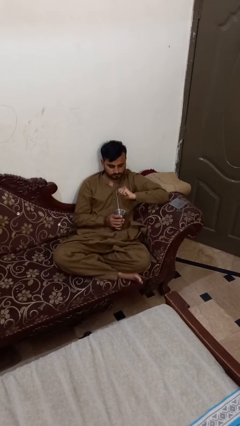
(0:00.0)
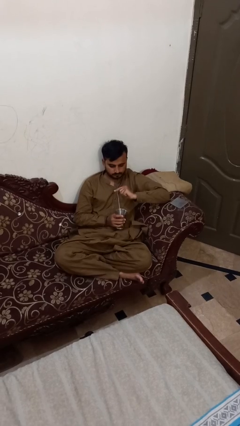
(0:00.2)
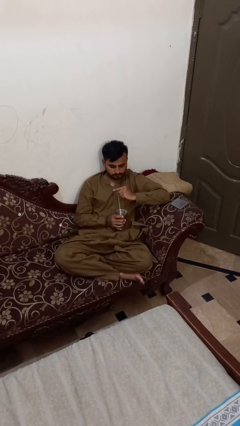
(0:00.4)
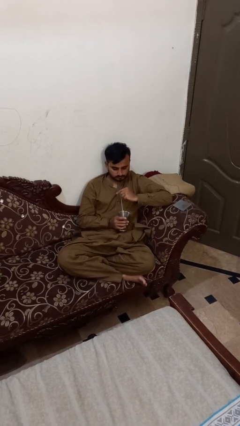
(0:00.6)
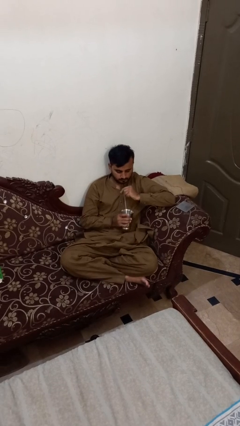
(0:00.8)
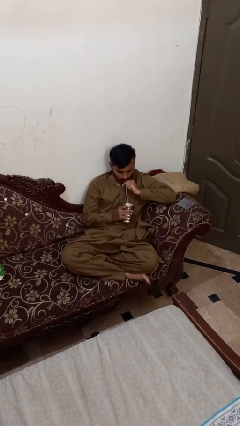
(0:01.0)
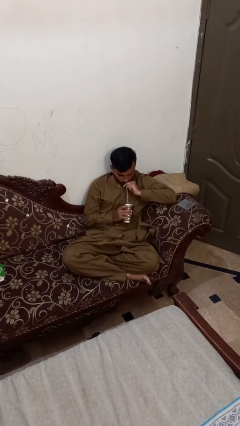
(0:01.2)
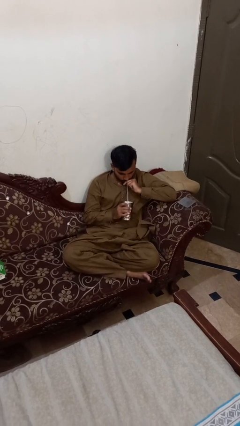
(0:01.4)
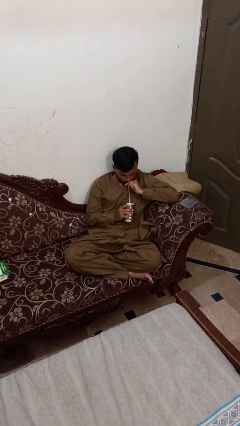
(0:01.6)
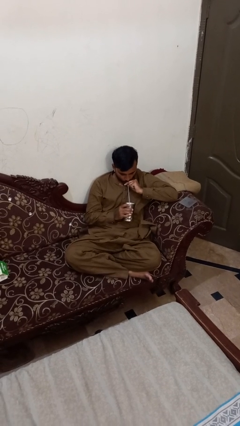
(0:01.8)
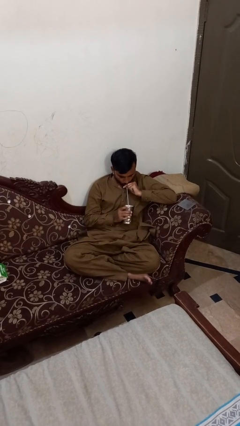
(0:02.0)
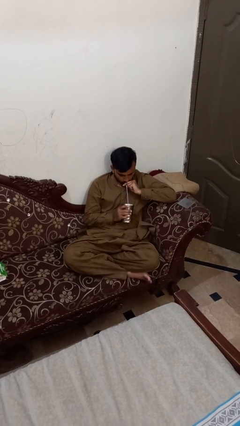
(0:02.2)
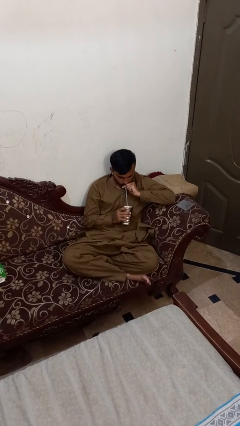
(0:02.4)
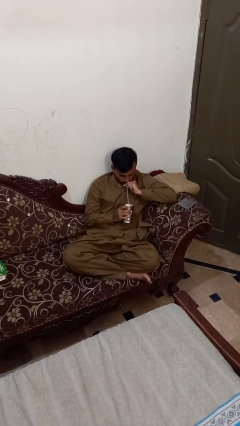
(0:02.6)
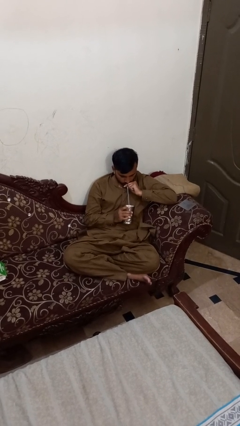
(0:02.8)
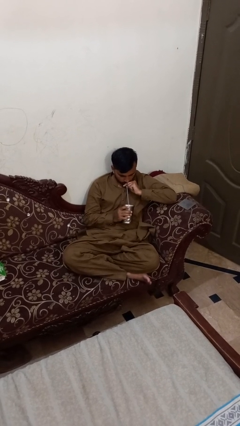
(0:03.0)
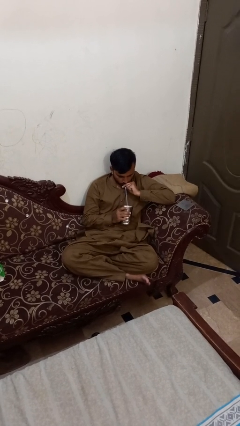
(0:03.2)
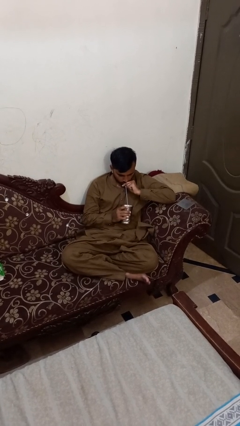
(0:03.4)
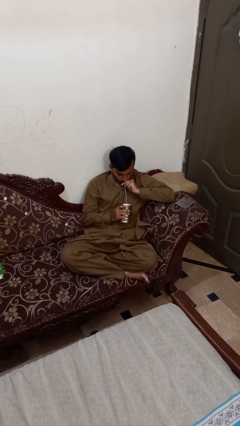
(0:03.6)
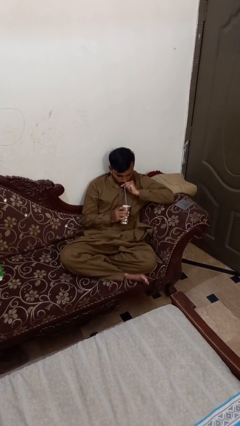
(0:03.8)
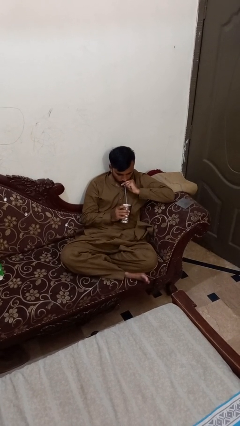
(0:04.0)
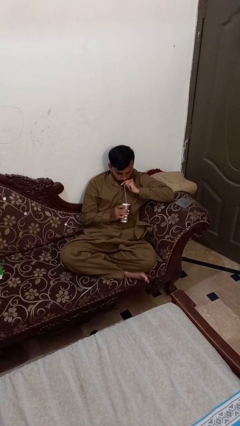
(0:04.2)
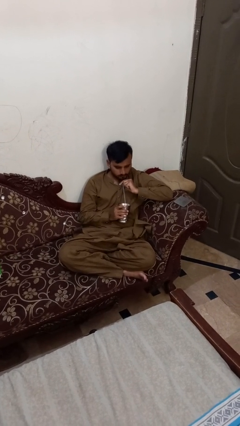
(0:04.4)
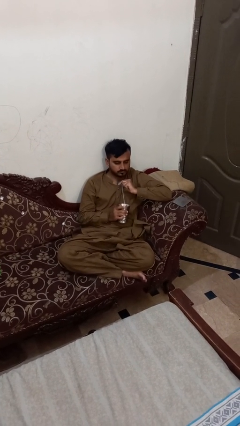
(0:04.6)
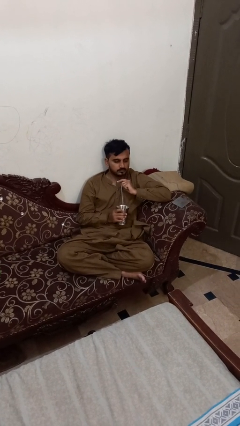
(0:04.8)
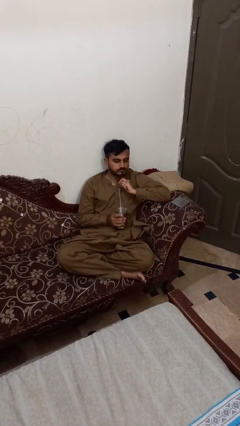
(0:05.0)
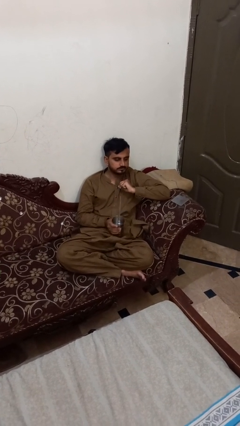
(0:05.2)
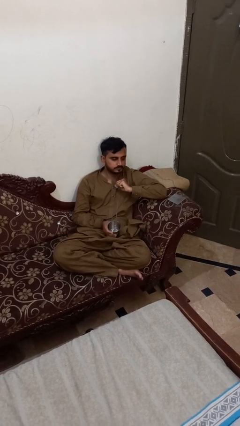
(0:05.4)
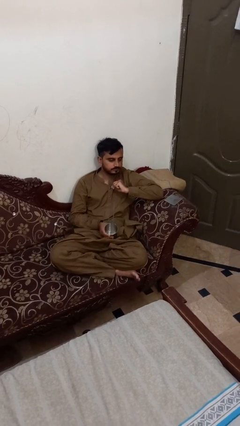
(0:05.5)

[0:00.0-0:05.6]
person drinks from straw

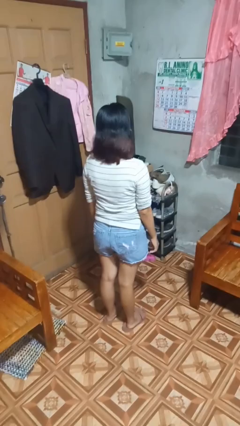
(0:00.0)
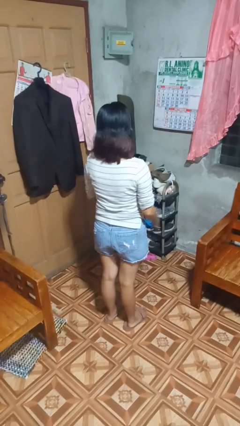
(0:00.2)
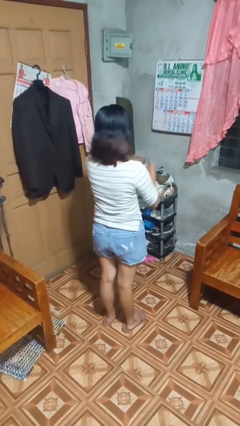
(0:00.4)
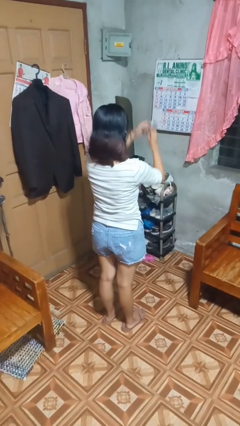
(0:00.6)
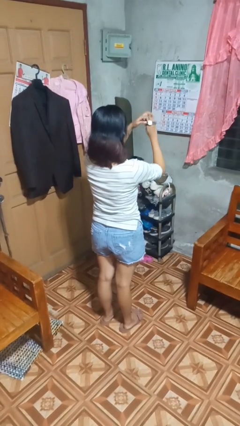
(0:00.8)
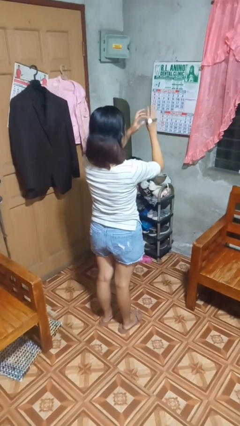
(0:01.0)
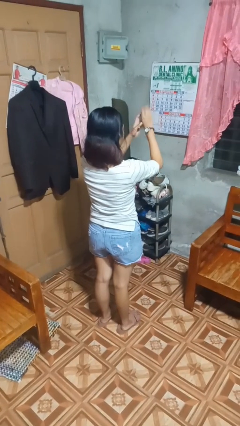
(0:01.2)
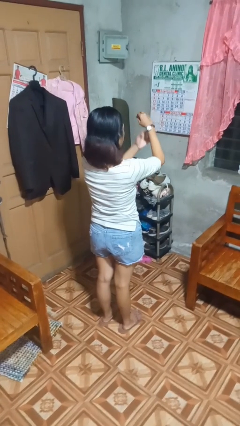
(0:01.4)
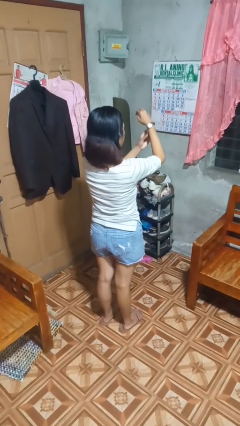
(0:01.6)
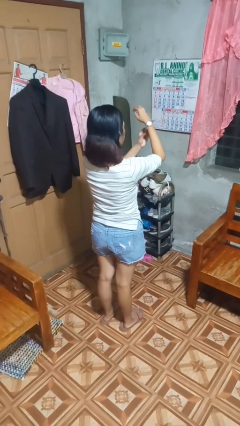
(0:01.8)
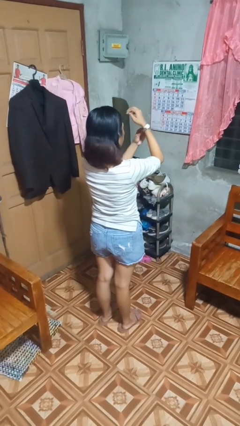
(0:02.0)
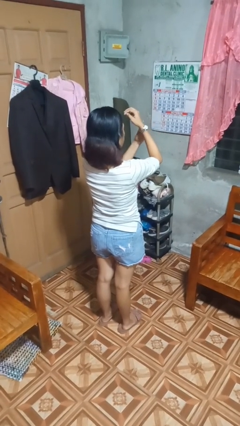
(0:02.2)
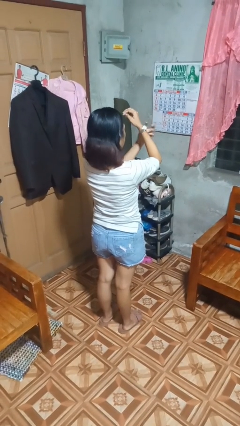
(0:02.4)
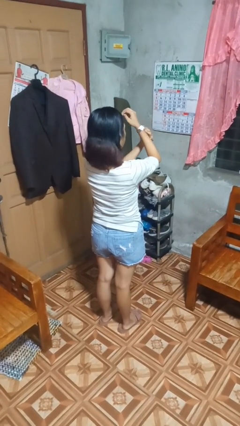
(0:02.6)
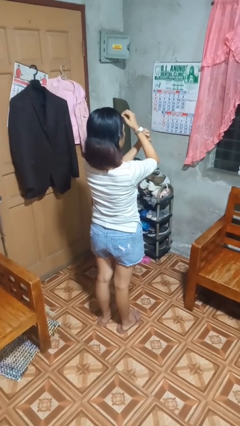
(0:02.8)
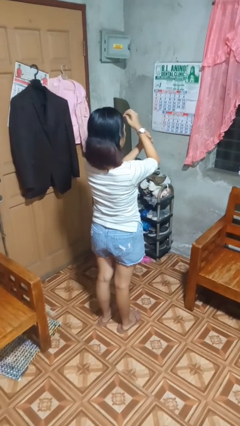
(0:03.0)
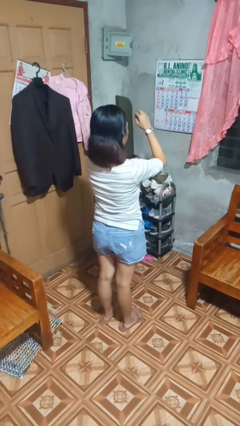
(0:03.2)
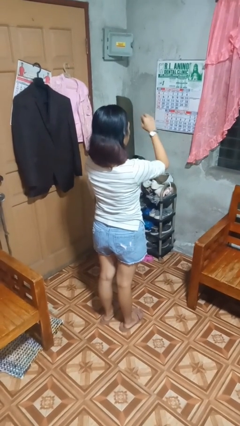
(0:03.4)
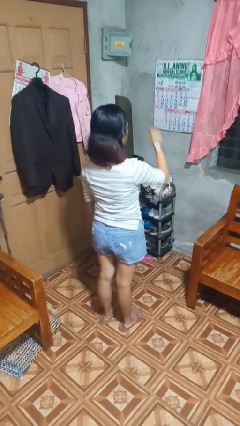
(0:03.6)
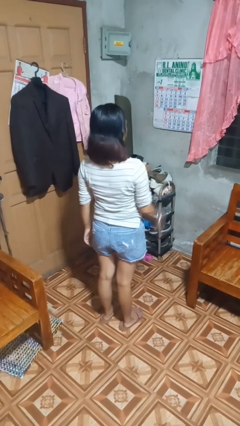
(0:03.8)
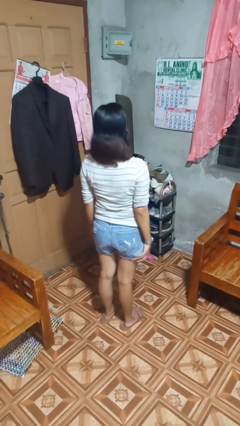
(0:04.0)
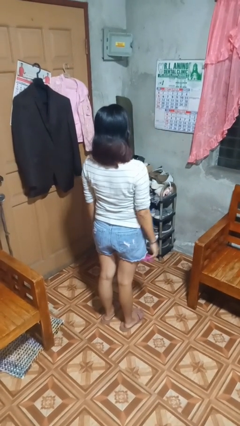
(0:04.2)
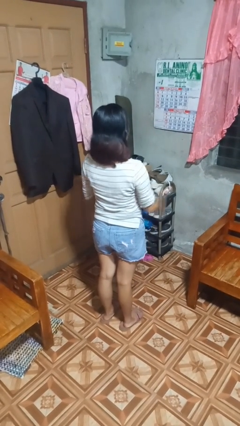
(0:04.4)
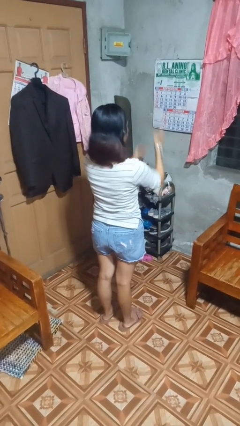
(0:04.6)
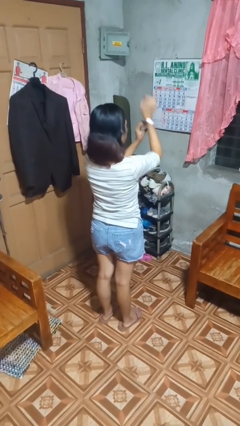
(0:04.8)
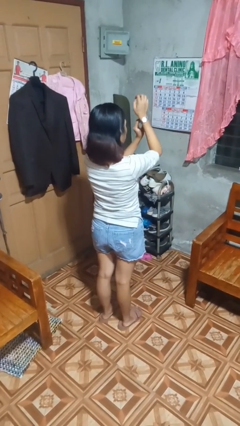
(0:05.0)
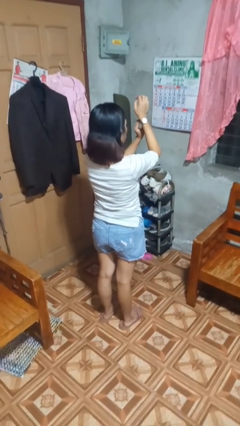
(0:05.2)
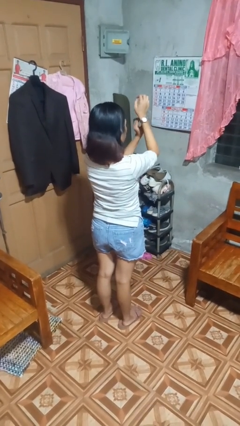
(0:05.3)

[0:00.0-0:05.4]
person puts on wristwatch

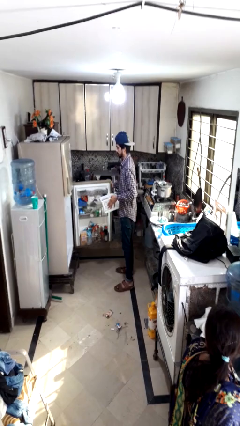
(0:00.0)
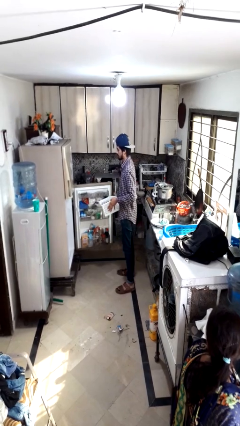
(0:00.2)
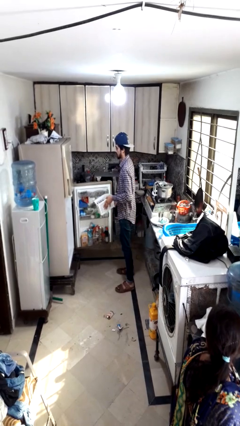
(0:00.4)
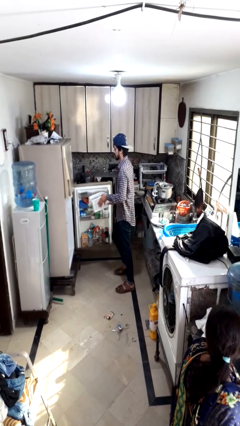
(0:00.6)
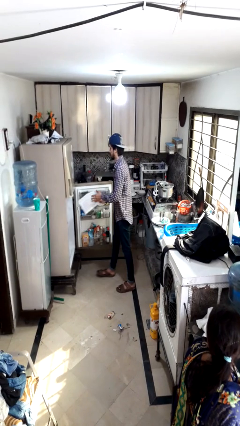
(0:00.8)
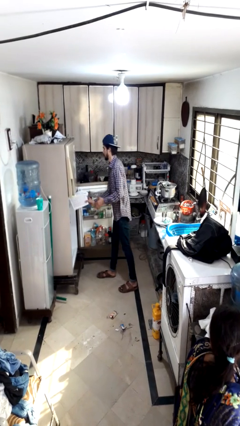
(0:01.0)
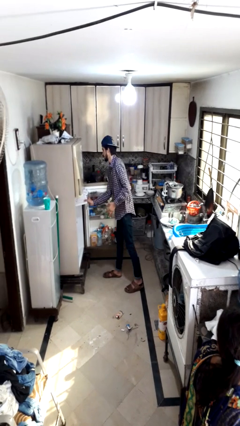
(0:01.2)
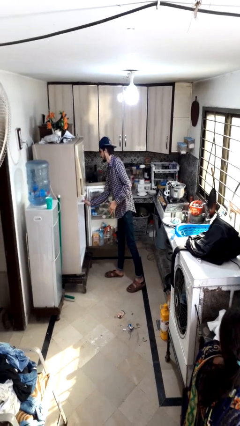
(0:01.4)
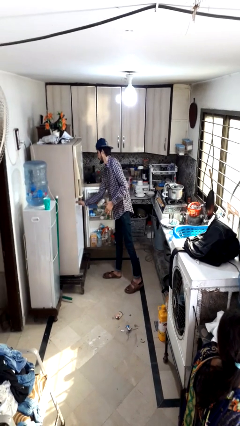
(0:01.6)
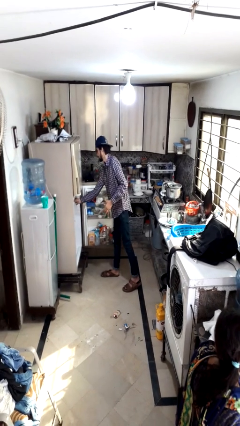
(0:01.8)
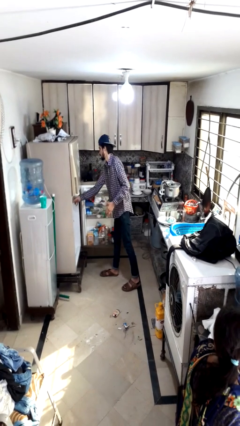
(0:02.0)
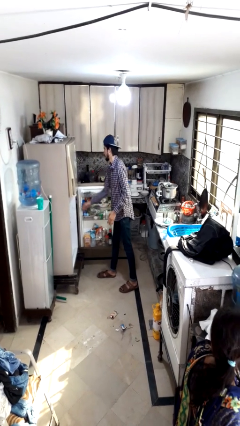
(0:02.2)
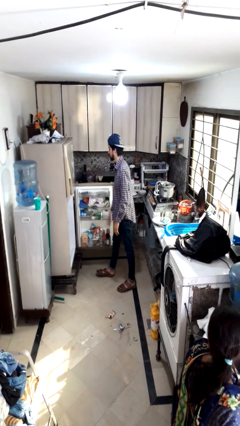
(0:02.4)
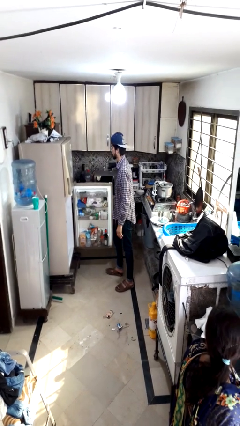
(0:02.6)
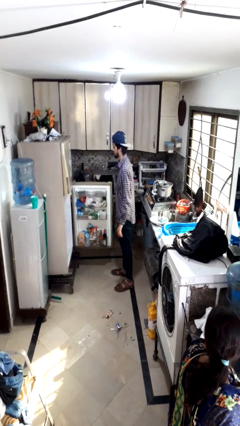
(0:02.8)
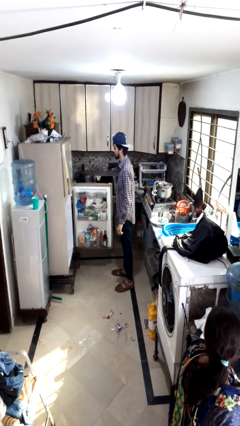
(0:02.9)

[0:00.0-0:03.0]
person puts object into refrigerator

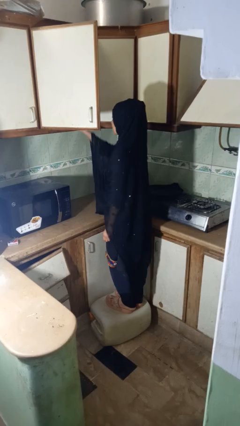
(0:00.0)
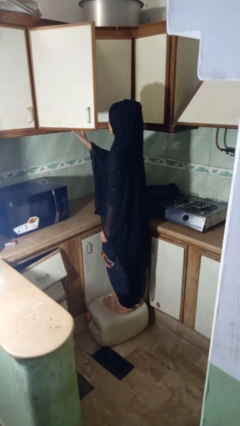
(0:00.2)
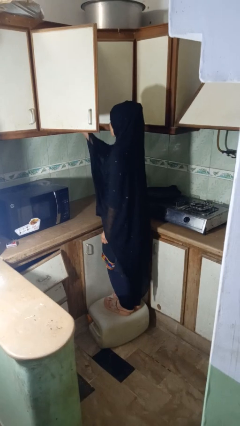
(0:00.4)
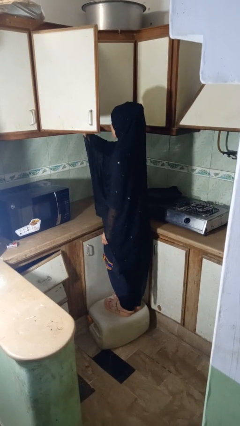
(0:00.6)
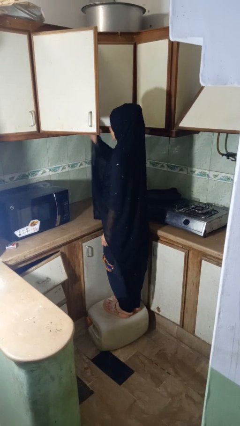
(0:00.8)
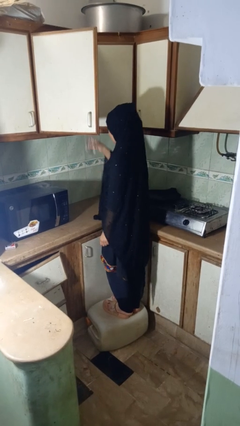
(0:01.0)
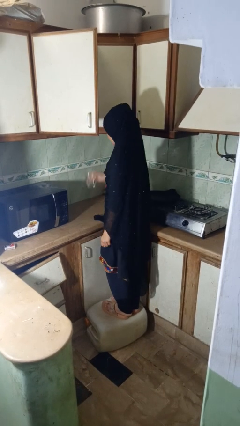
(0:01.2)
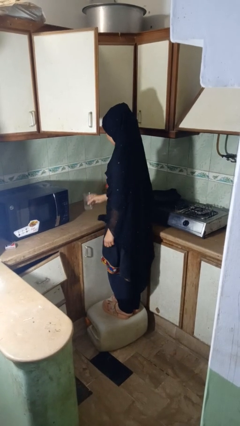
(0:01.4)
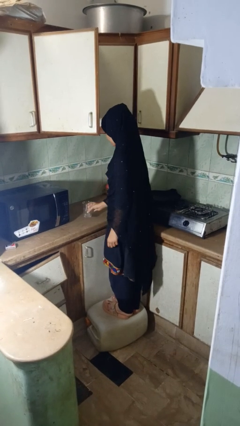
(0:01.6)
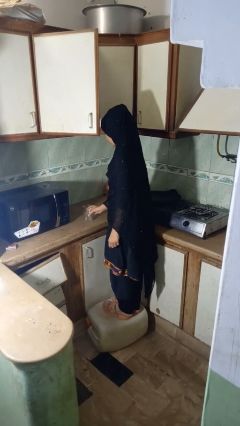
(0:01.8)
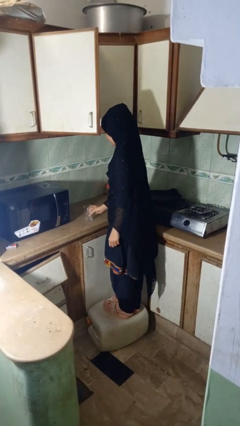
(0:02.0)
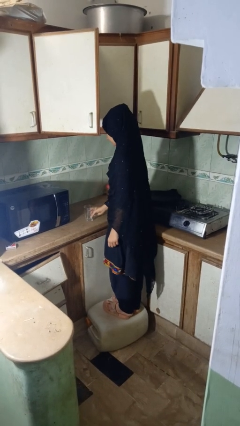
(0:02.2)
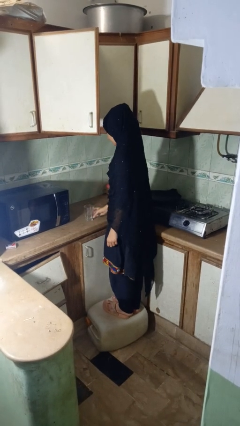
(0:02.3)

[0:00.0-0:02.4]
person puts down object into cabinet

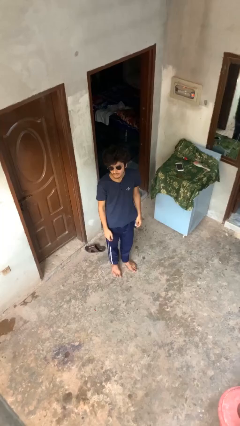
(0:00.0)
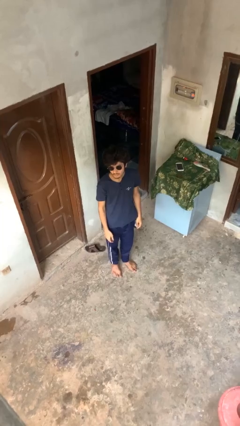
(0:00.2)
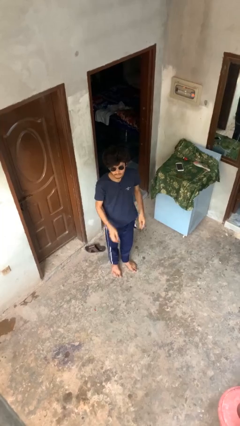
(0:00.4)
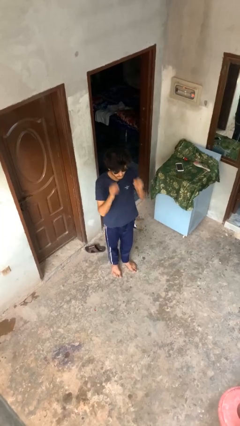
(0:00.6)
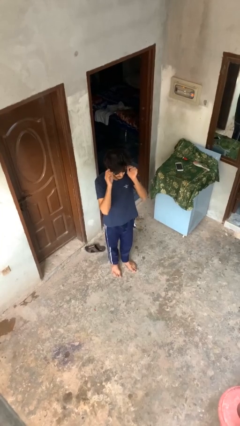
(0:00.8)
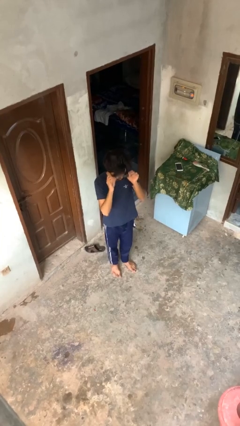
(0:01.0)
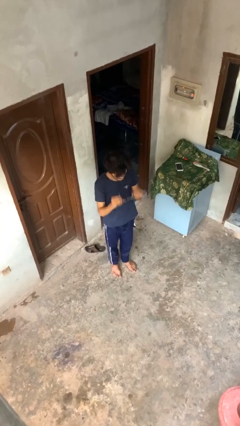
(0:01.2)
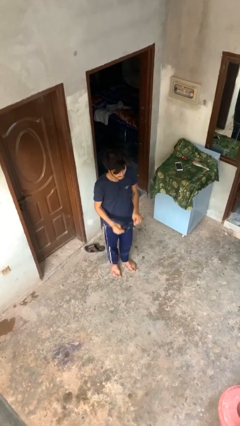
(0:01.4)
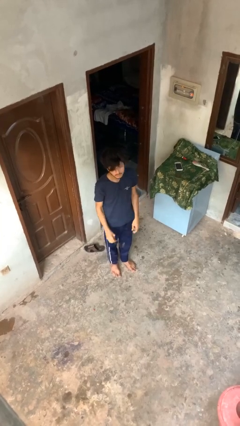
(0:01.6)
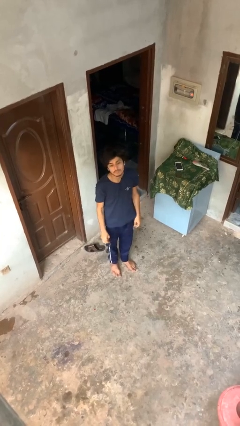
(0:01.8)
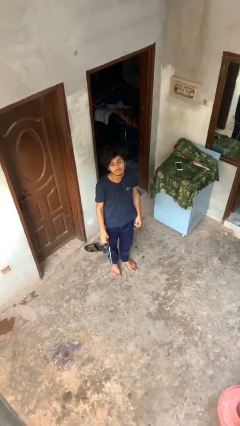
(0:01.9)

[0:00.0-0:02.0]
person takes off sunglasses
